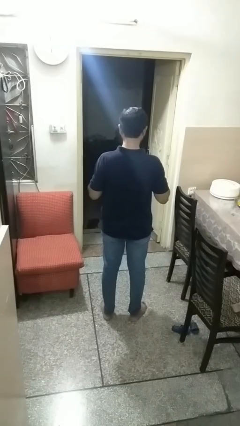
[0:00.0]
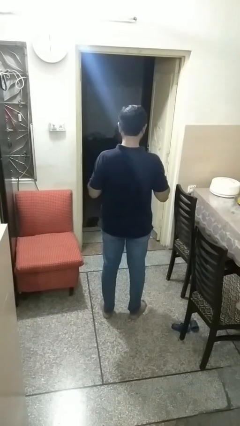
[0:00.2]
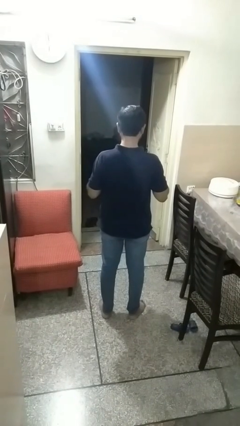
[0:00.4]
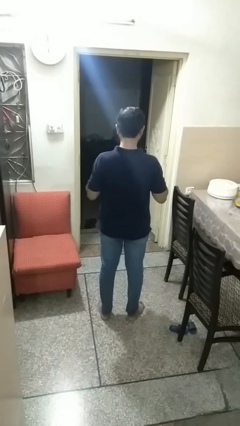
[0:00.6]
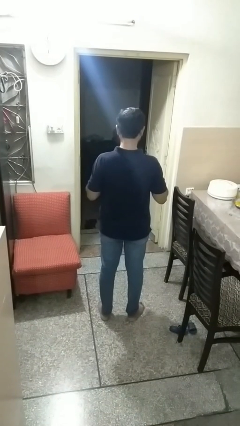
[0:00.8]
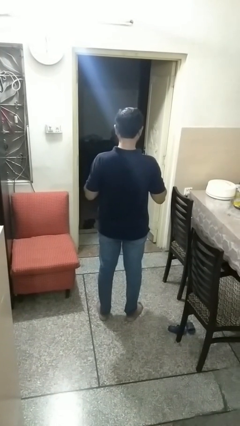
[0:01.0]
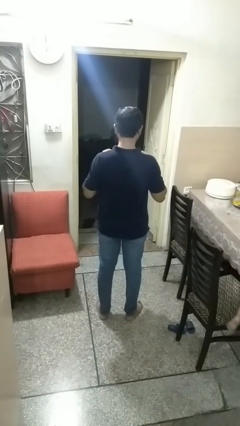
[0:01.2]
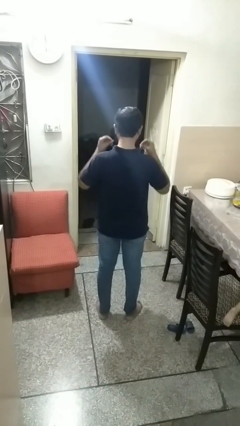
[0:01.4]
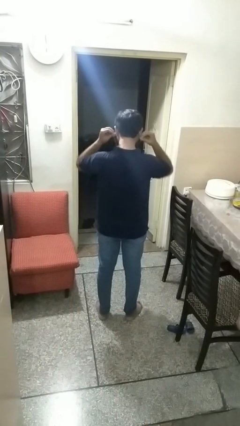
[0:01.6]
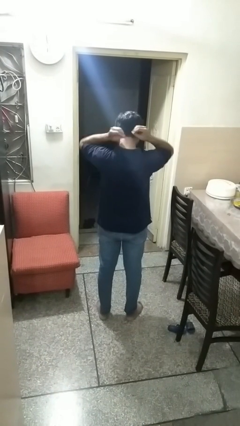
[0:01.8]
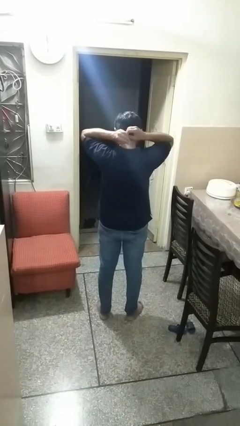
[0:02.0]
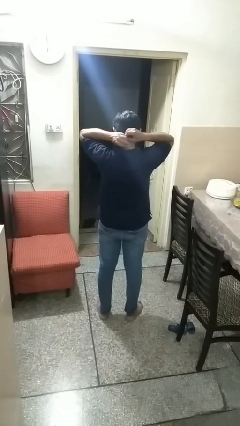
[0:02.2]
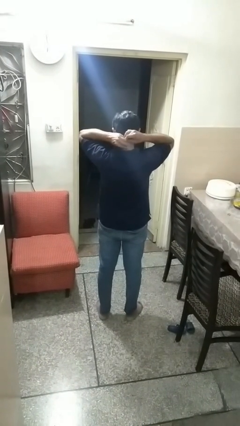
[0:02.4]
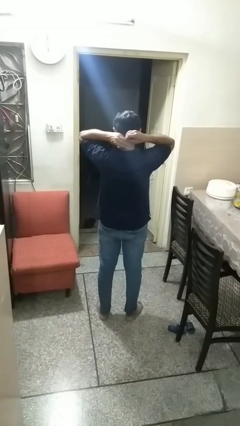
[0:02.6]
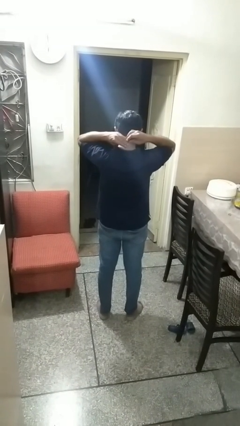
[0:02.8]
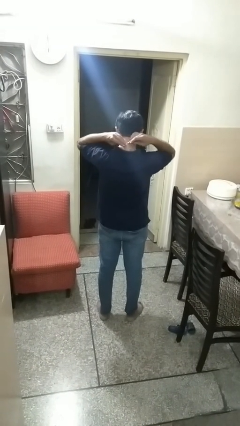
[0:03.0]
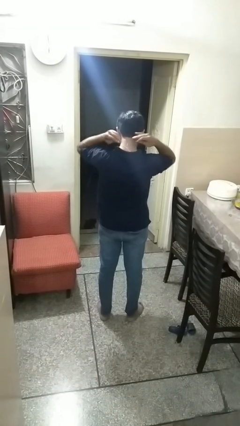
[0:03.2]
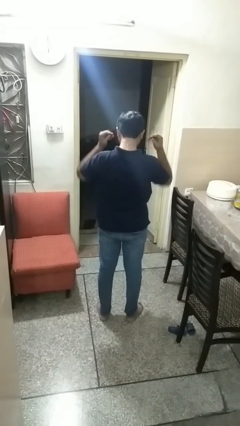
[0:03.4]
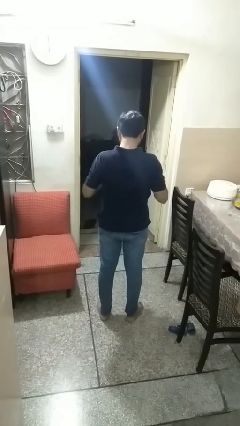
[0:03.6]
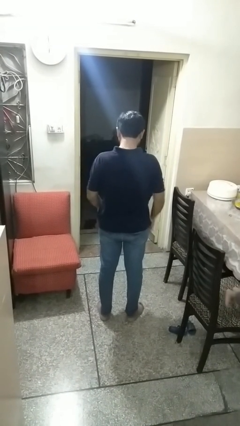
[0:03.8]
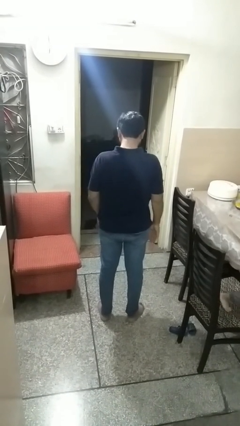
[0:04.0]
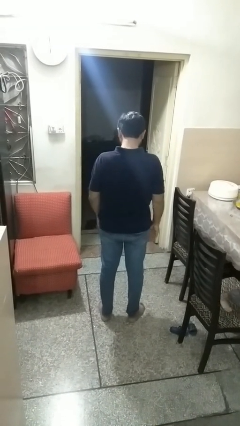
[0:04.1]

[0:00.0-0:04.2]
person puts on necklace

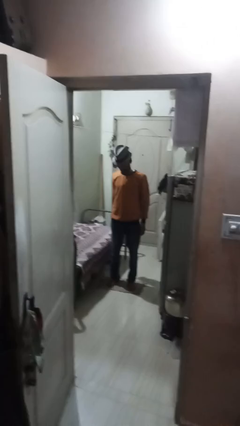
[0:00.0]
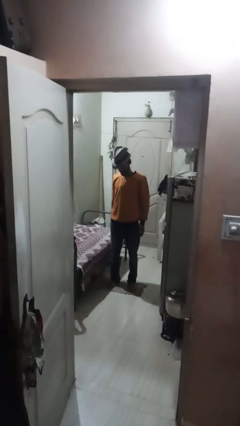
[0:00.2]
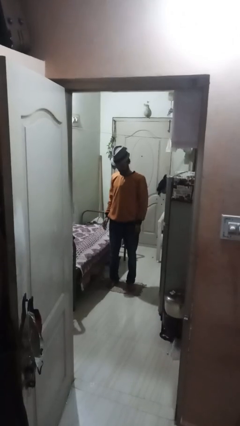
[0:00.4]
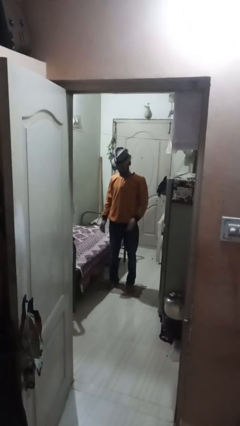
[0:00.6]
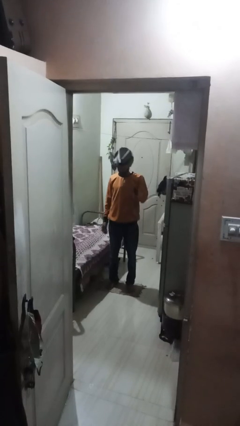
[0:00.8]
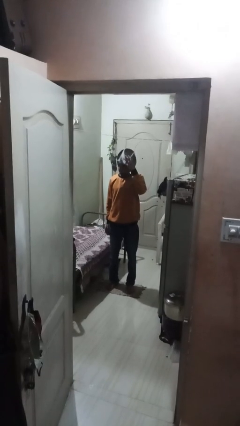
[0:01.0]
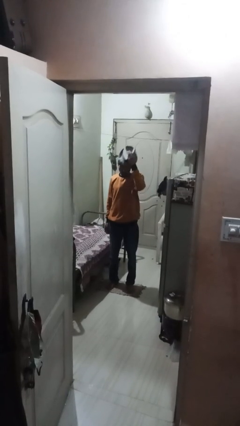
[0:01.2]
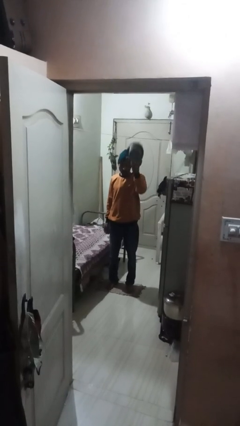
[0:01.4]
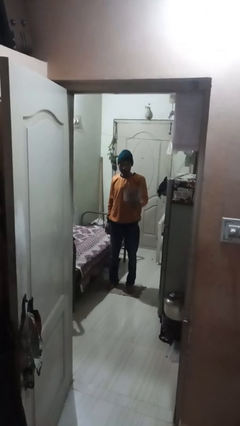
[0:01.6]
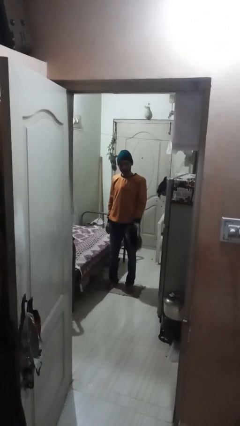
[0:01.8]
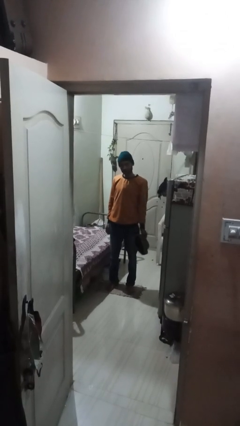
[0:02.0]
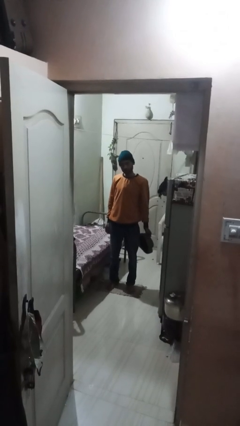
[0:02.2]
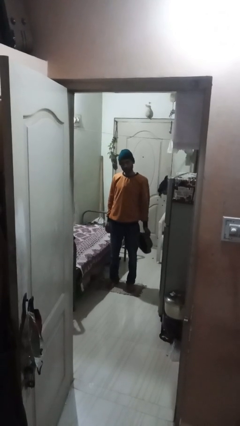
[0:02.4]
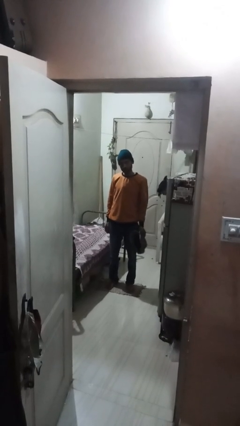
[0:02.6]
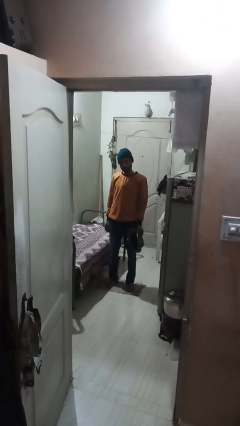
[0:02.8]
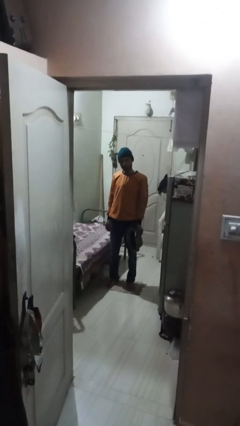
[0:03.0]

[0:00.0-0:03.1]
person takes off hat

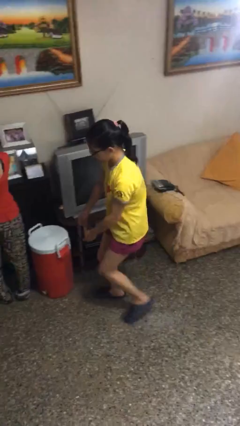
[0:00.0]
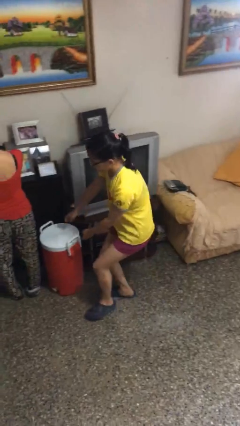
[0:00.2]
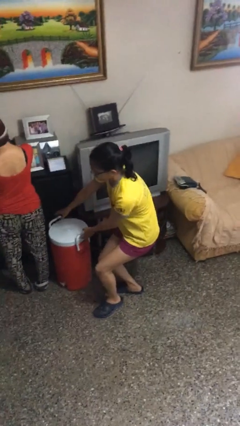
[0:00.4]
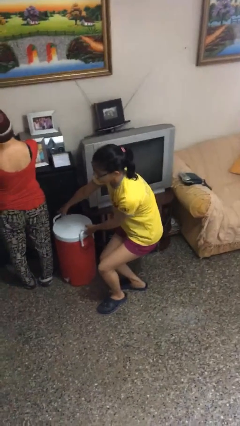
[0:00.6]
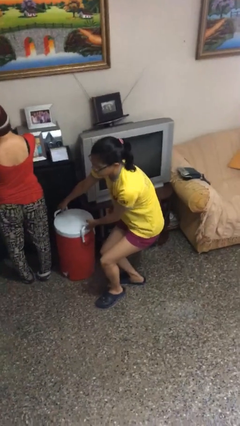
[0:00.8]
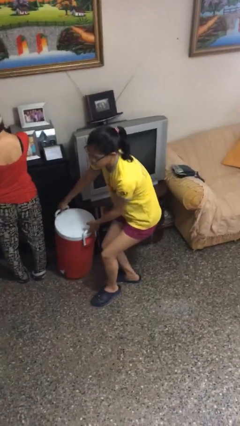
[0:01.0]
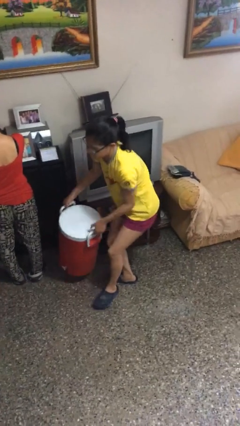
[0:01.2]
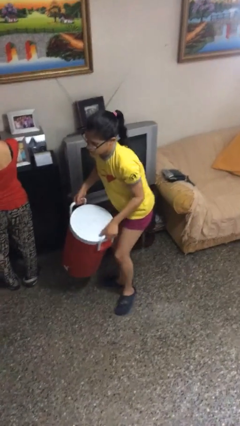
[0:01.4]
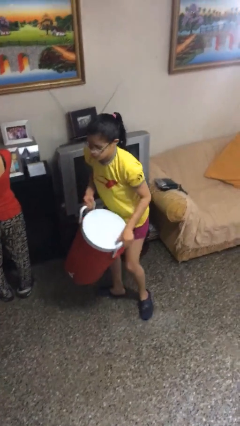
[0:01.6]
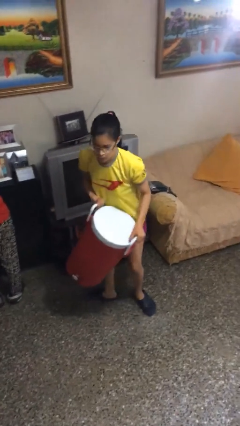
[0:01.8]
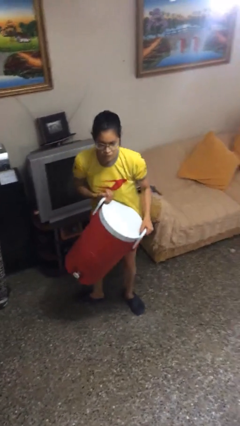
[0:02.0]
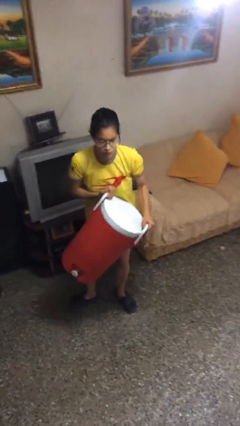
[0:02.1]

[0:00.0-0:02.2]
person steals object from person

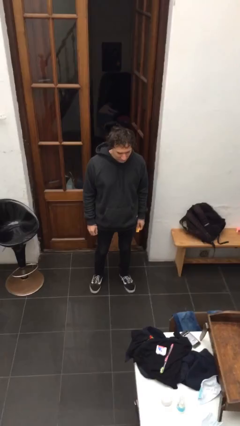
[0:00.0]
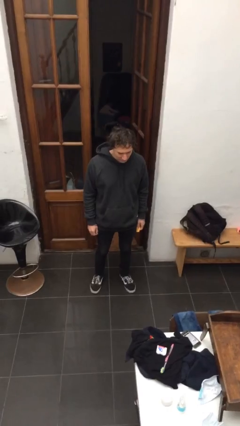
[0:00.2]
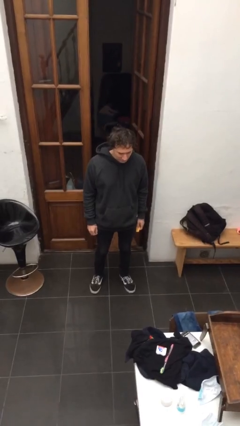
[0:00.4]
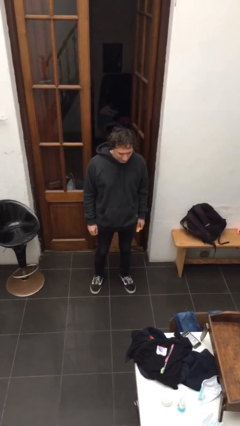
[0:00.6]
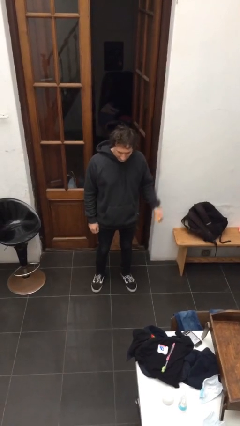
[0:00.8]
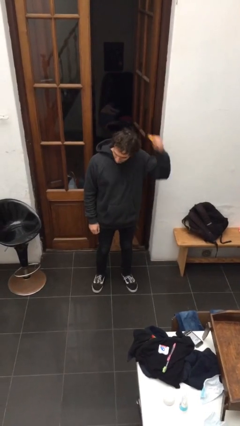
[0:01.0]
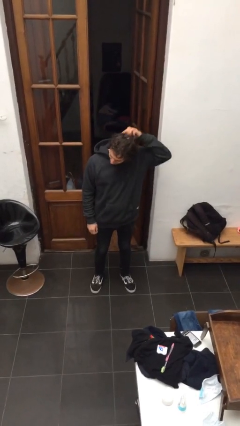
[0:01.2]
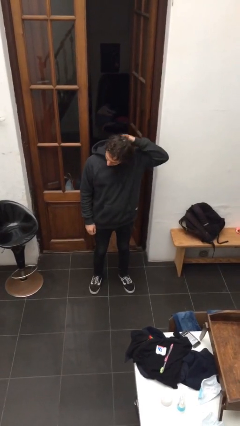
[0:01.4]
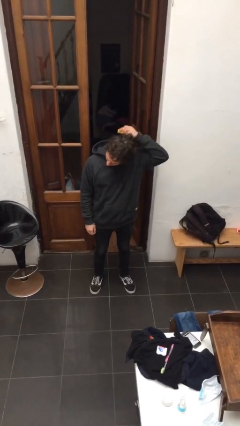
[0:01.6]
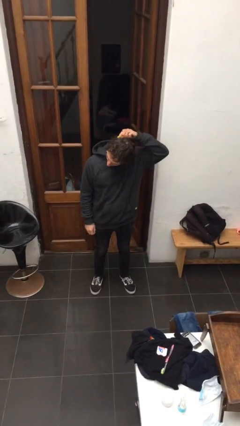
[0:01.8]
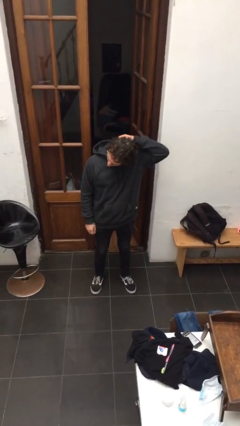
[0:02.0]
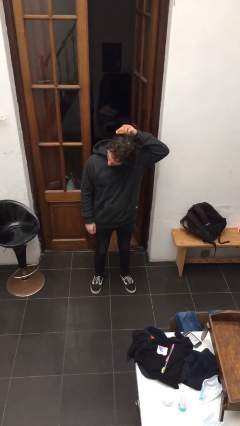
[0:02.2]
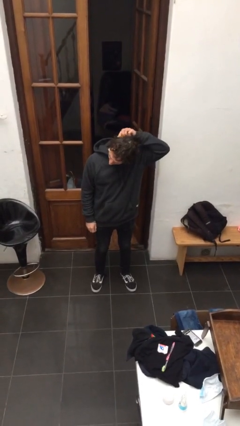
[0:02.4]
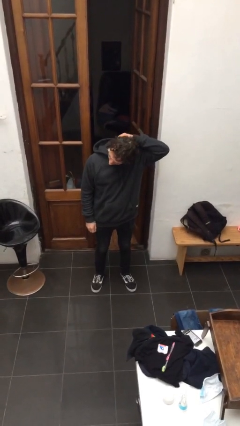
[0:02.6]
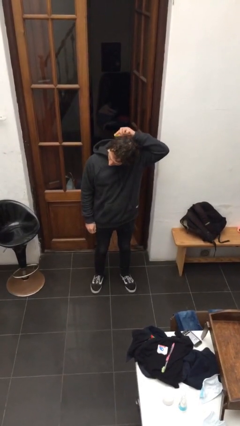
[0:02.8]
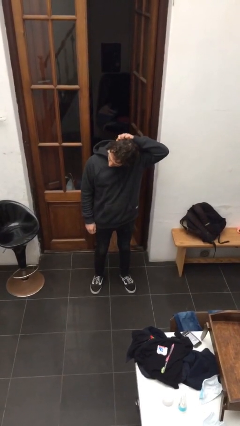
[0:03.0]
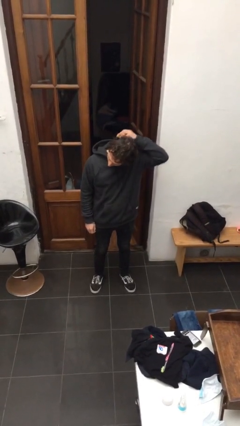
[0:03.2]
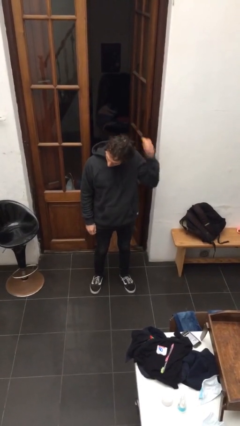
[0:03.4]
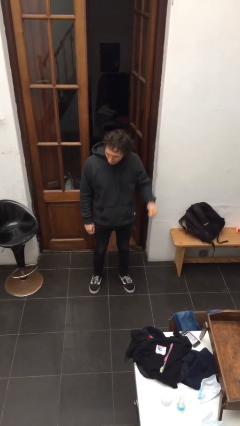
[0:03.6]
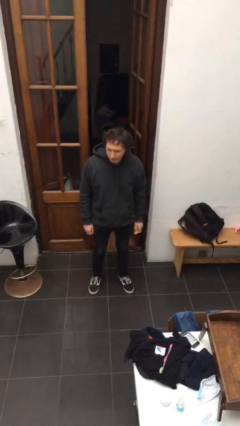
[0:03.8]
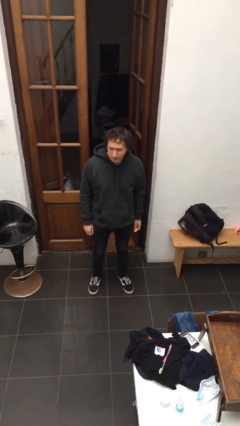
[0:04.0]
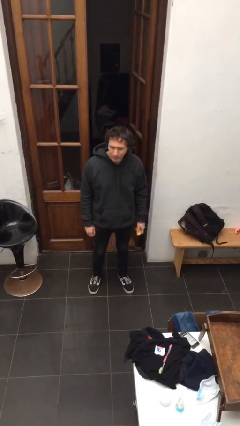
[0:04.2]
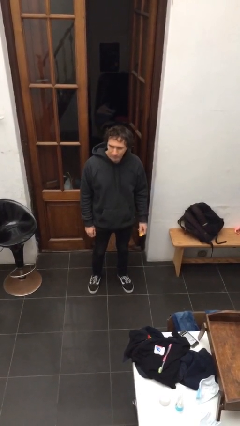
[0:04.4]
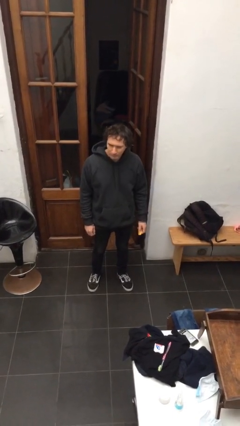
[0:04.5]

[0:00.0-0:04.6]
person brushes hair

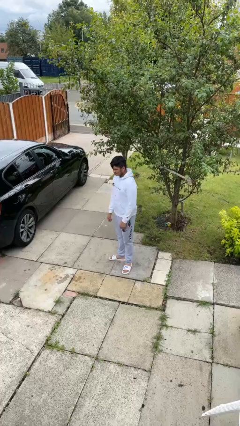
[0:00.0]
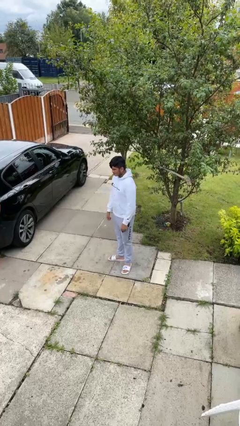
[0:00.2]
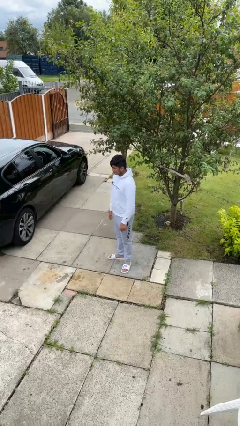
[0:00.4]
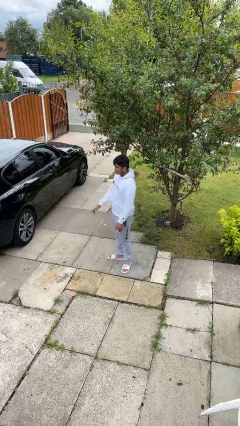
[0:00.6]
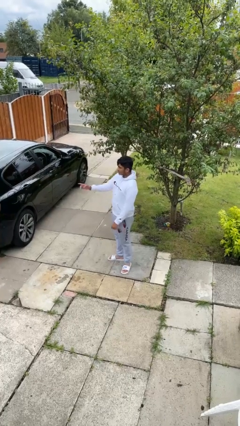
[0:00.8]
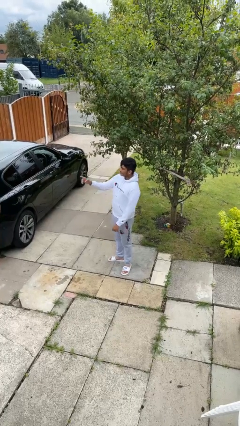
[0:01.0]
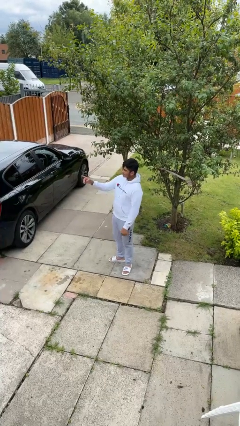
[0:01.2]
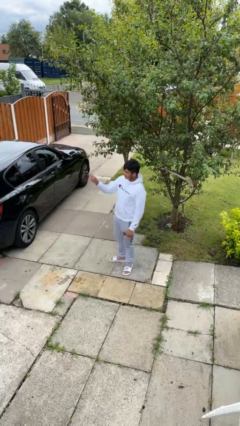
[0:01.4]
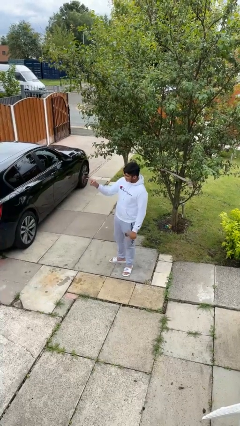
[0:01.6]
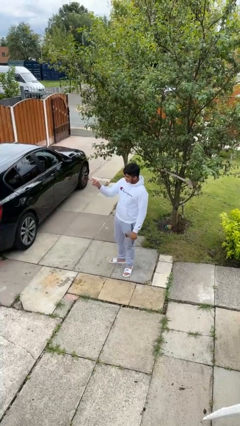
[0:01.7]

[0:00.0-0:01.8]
person points at person

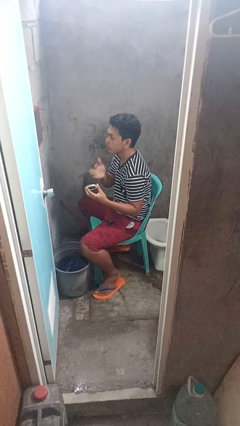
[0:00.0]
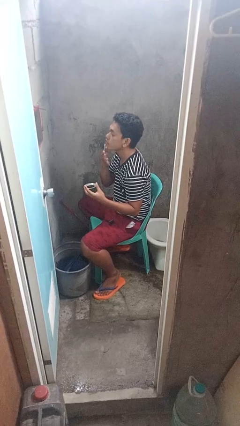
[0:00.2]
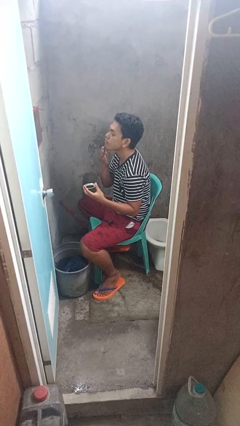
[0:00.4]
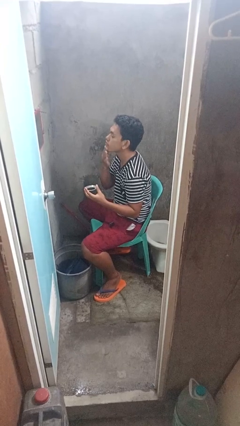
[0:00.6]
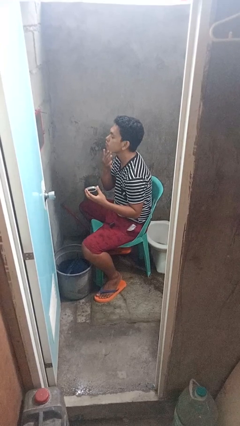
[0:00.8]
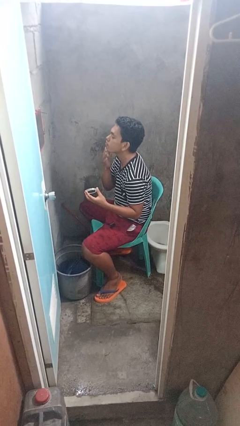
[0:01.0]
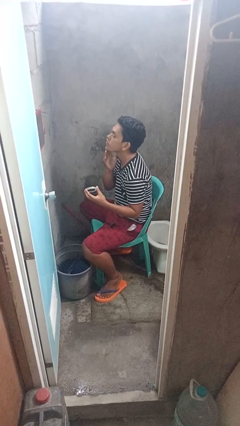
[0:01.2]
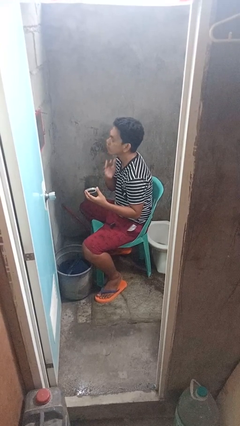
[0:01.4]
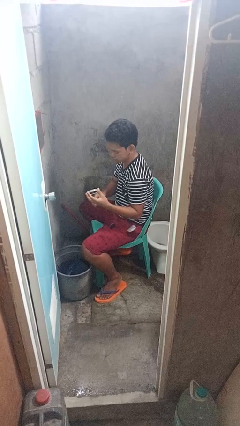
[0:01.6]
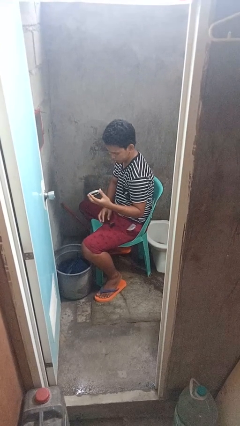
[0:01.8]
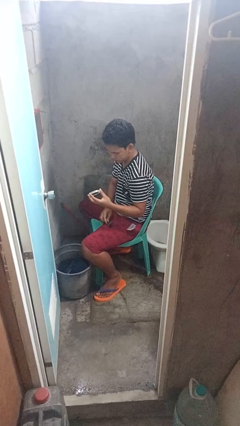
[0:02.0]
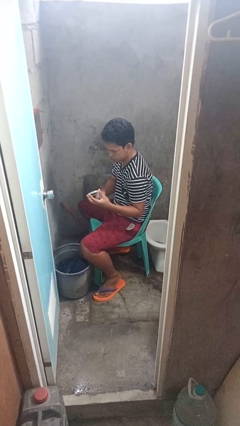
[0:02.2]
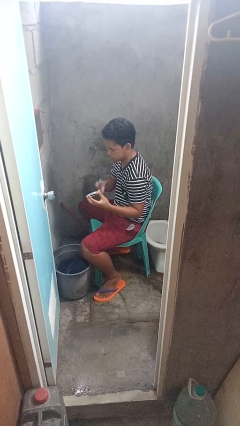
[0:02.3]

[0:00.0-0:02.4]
person applies shaving cream
